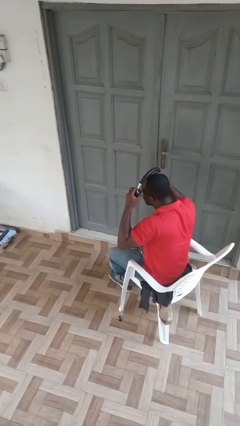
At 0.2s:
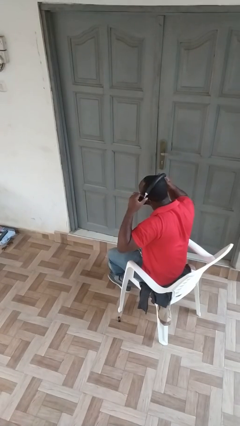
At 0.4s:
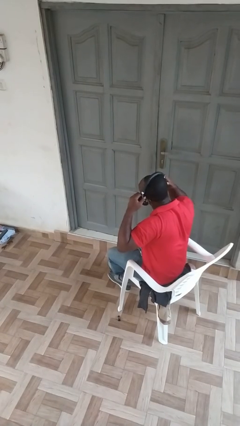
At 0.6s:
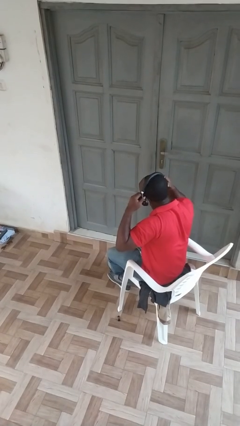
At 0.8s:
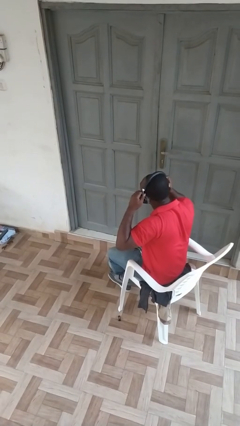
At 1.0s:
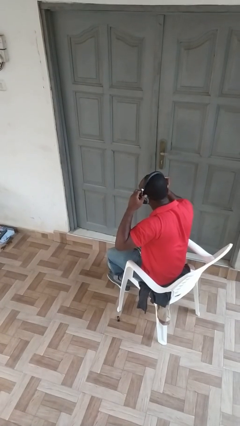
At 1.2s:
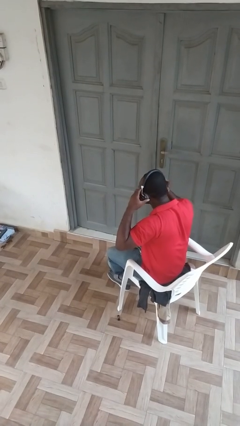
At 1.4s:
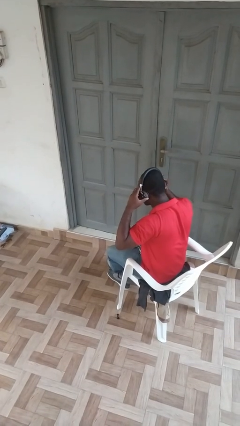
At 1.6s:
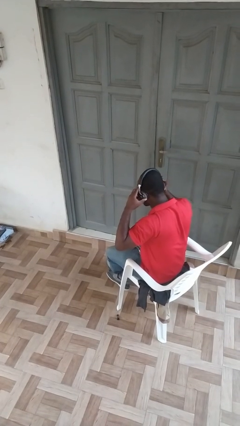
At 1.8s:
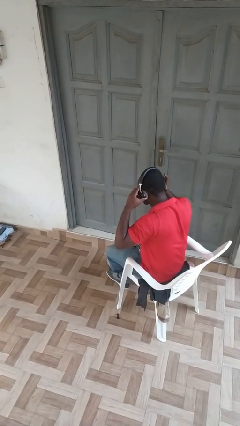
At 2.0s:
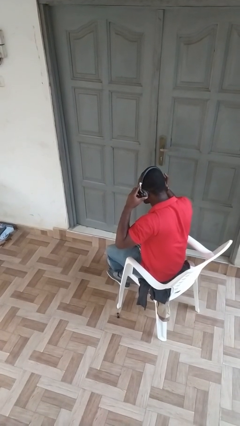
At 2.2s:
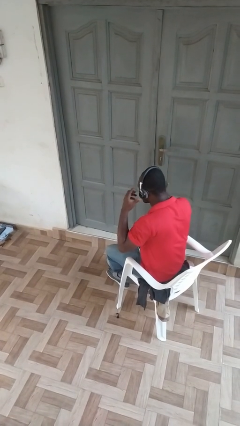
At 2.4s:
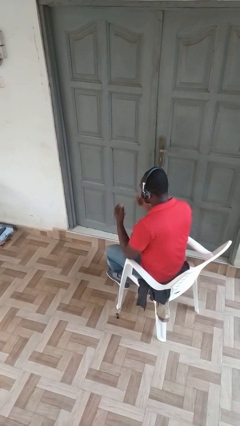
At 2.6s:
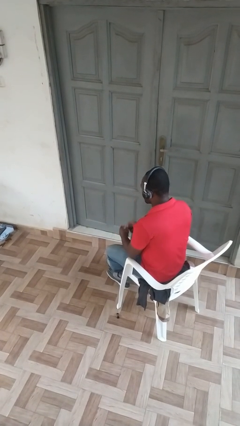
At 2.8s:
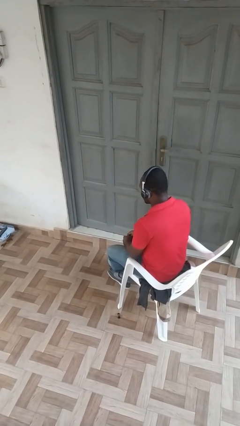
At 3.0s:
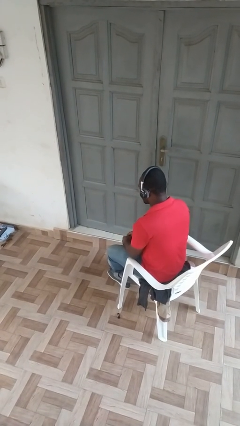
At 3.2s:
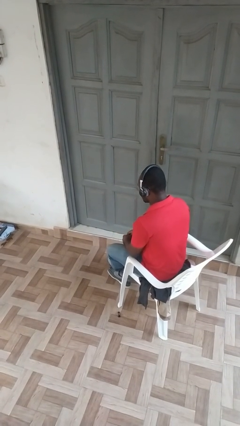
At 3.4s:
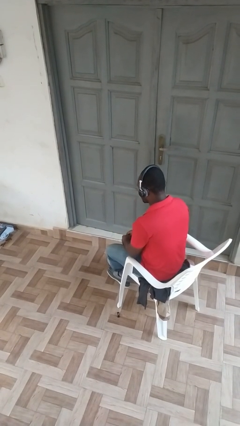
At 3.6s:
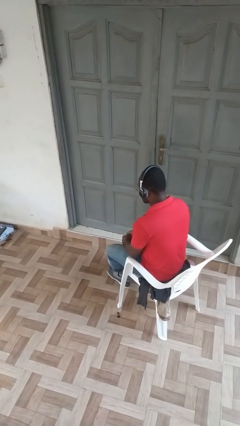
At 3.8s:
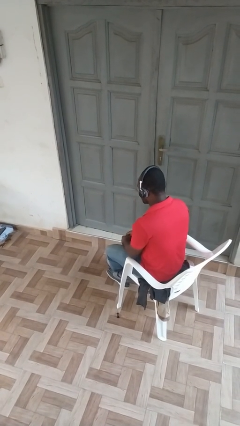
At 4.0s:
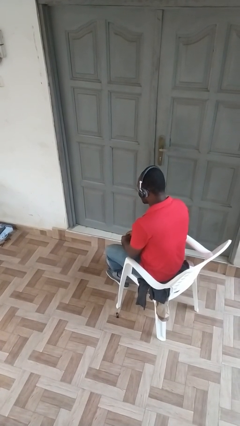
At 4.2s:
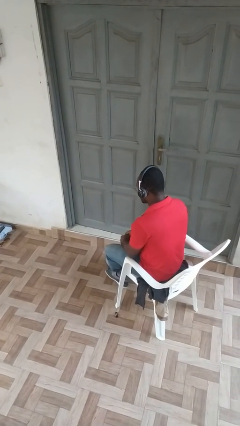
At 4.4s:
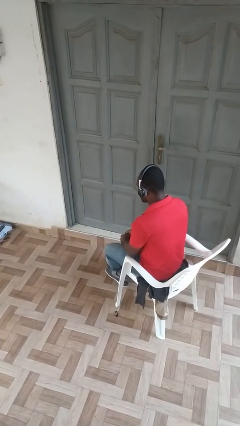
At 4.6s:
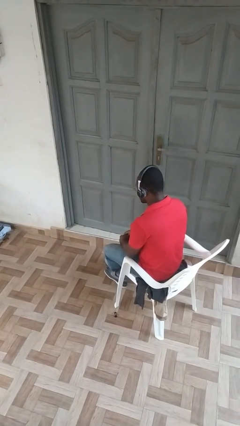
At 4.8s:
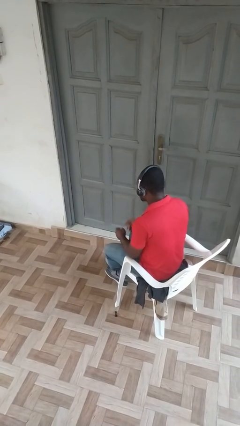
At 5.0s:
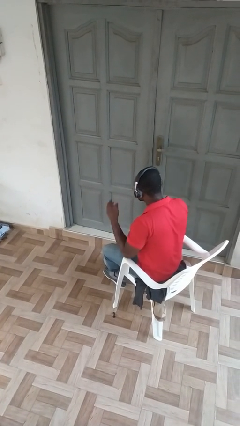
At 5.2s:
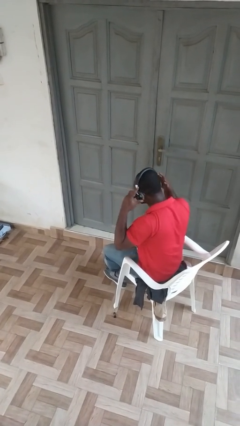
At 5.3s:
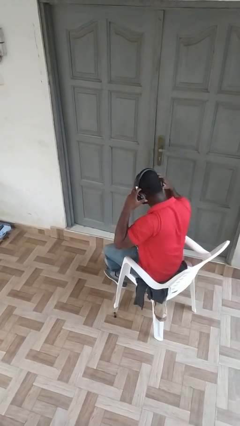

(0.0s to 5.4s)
person puts on headphones

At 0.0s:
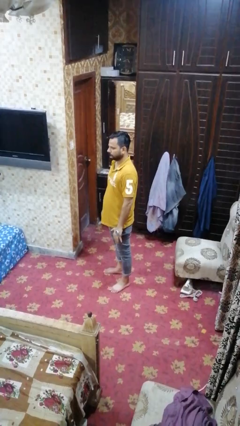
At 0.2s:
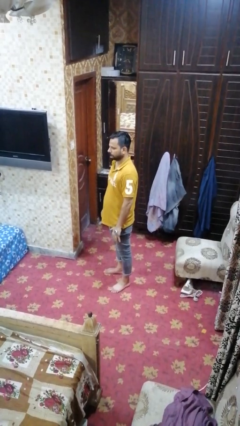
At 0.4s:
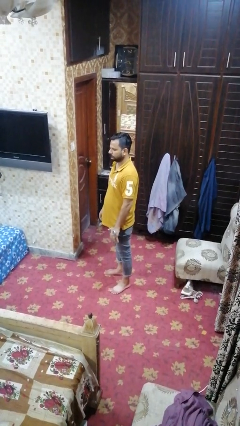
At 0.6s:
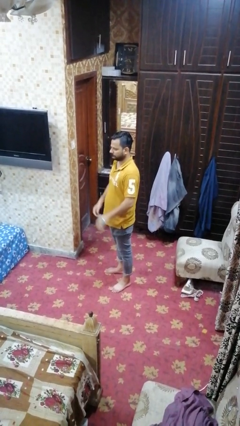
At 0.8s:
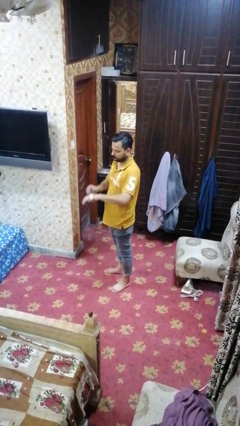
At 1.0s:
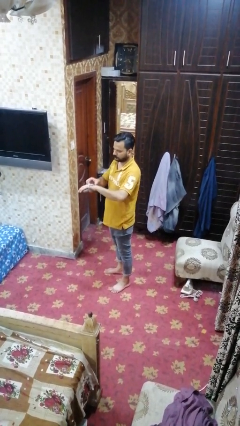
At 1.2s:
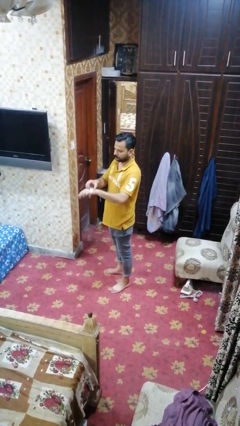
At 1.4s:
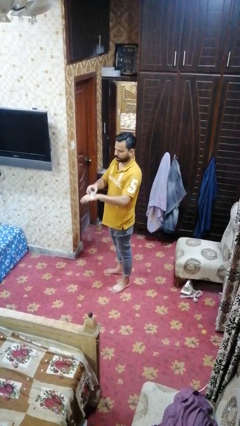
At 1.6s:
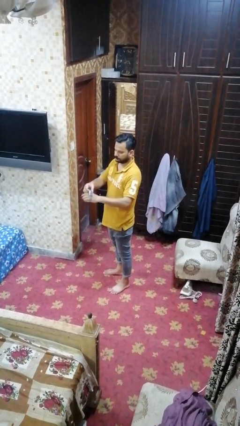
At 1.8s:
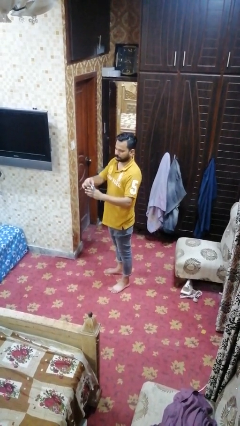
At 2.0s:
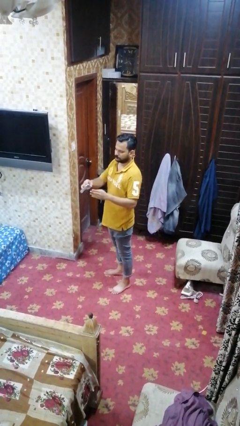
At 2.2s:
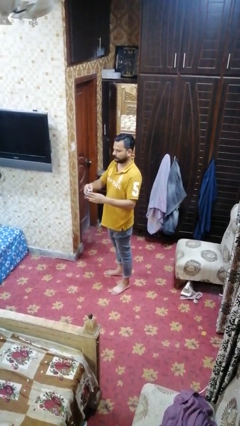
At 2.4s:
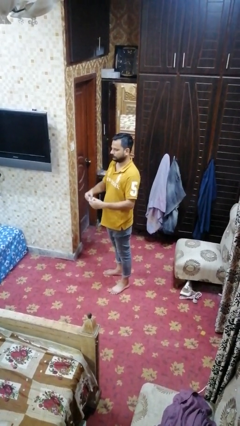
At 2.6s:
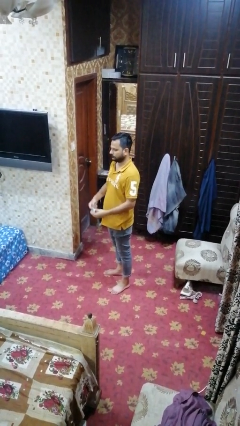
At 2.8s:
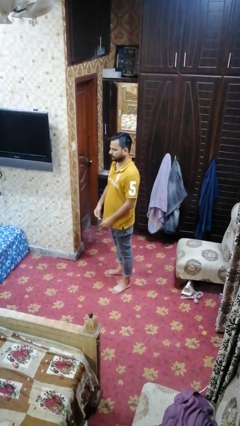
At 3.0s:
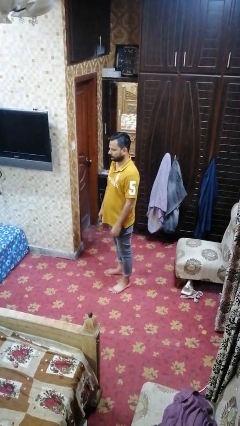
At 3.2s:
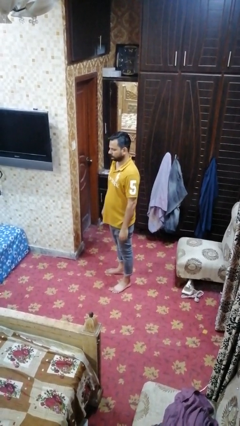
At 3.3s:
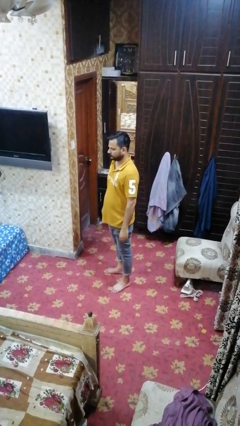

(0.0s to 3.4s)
person takes off wristwatch

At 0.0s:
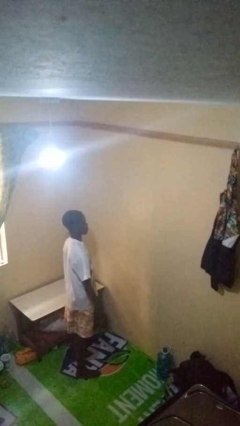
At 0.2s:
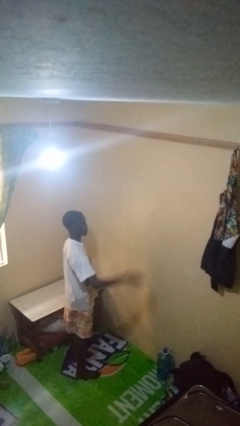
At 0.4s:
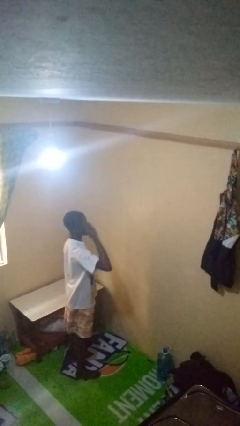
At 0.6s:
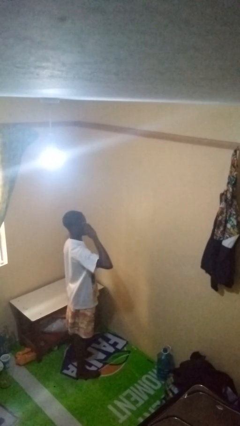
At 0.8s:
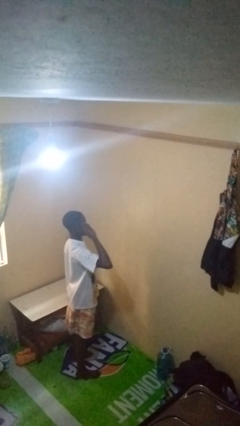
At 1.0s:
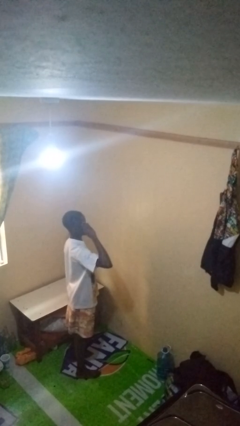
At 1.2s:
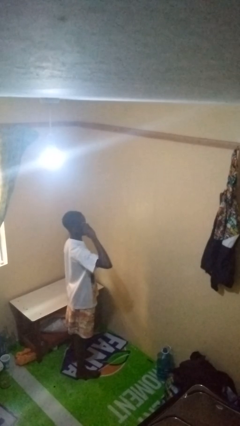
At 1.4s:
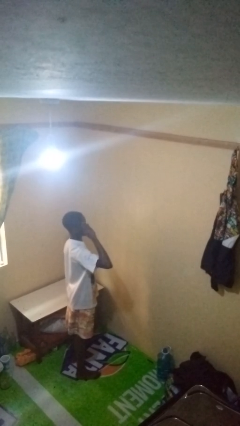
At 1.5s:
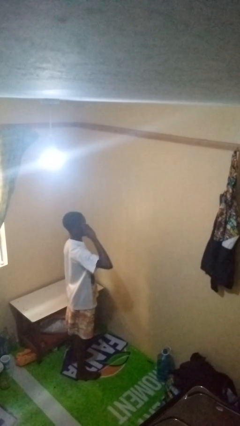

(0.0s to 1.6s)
person salutes

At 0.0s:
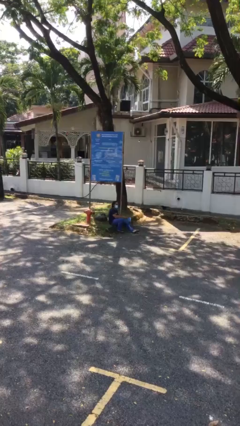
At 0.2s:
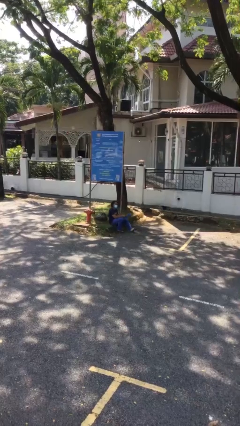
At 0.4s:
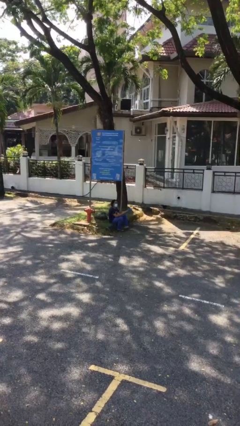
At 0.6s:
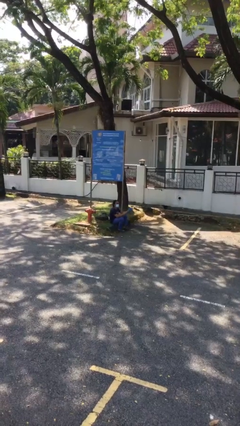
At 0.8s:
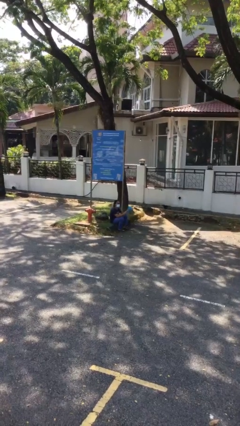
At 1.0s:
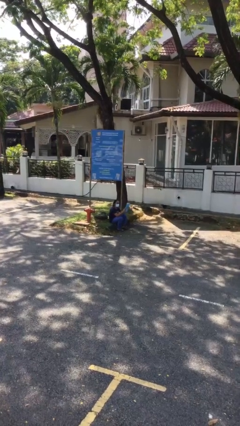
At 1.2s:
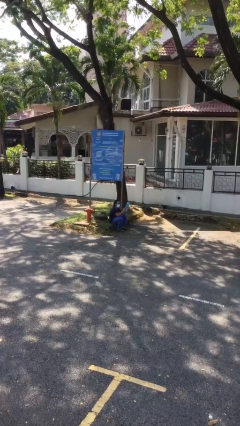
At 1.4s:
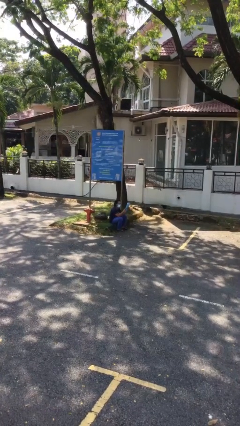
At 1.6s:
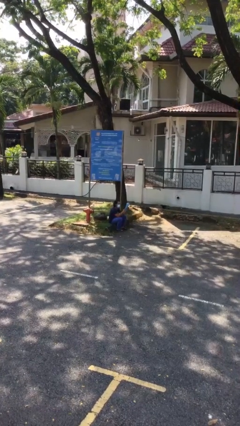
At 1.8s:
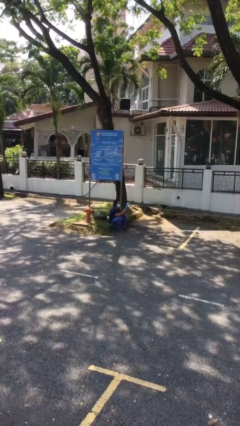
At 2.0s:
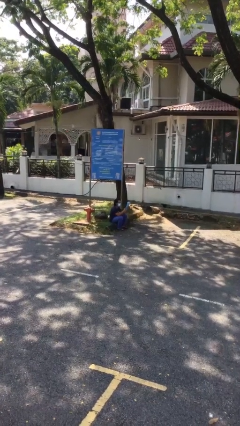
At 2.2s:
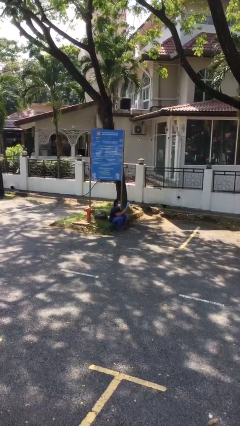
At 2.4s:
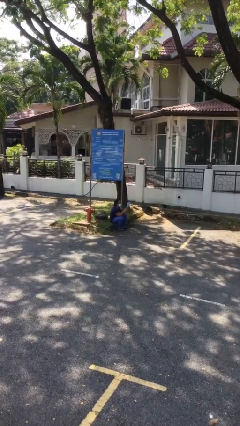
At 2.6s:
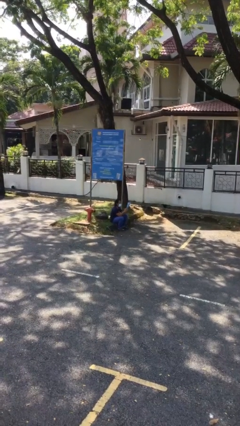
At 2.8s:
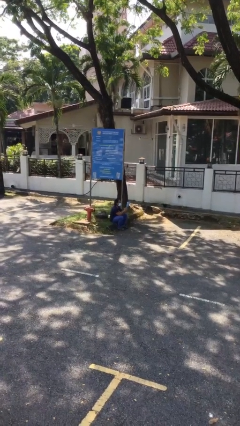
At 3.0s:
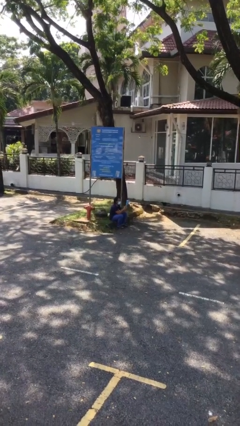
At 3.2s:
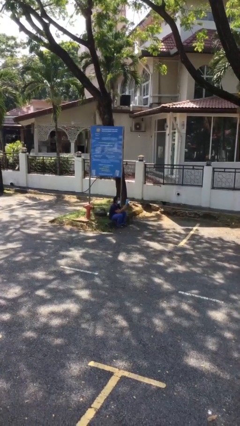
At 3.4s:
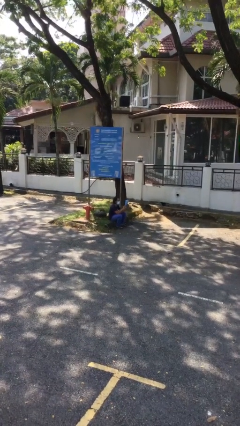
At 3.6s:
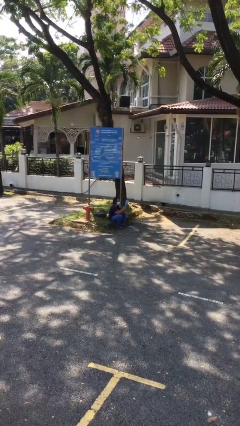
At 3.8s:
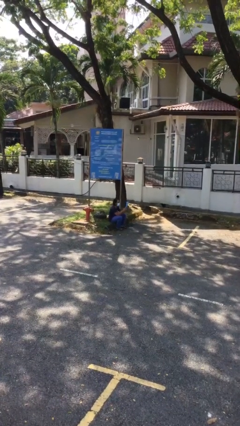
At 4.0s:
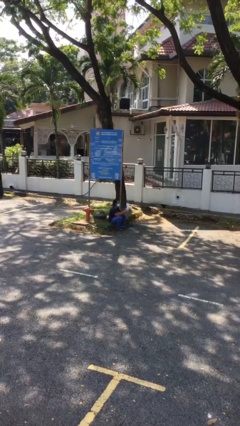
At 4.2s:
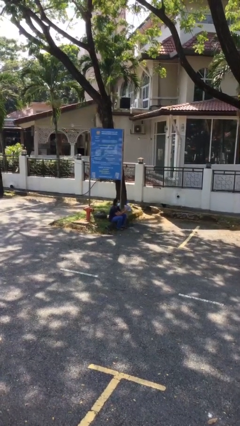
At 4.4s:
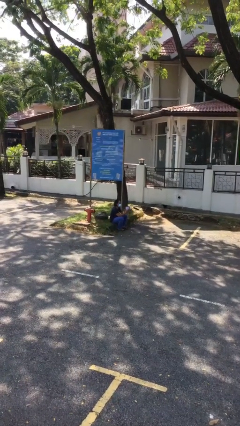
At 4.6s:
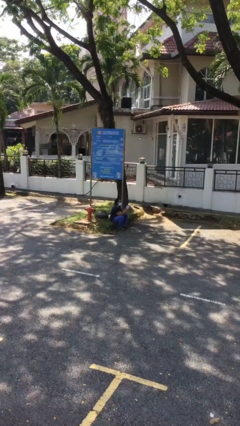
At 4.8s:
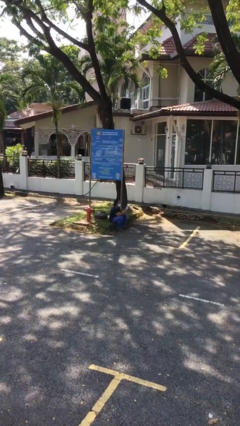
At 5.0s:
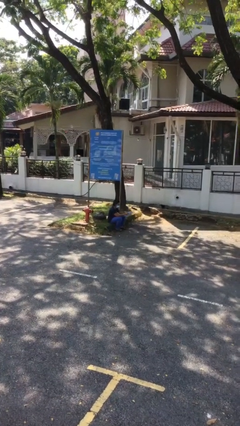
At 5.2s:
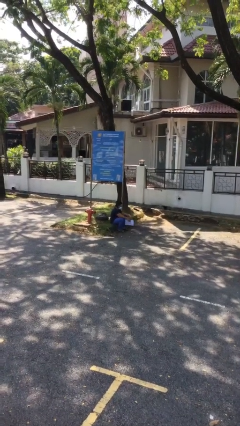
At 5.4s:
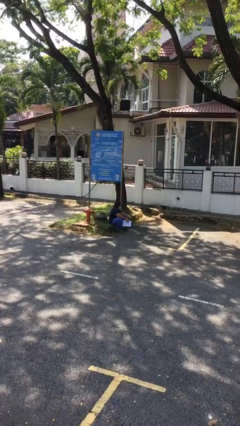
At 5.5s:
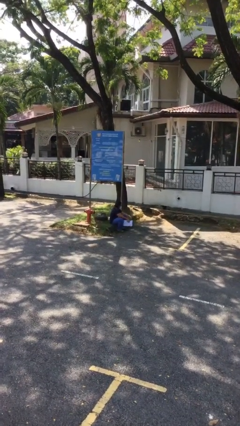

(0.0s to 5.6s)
person reads document

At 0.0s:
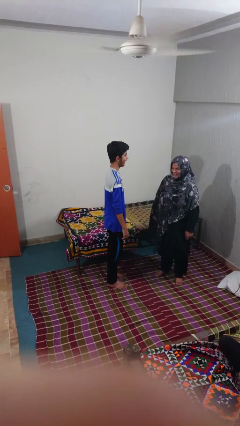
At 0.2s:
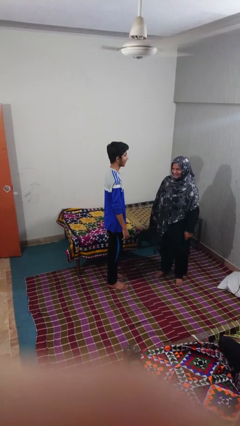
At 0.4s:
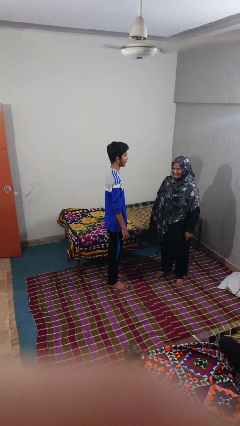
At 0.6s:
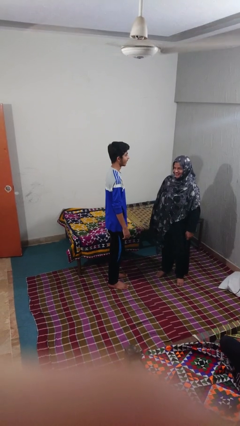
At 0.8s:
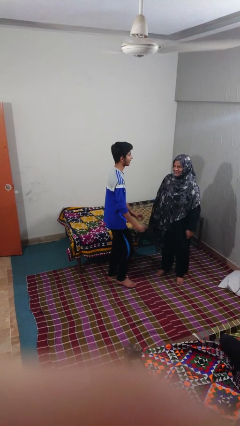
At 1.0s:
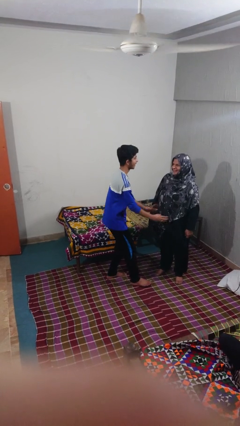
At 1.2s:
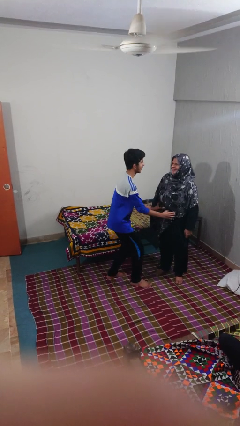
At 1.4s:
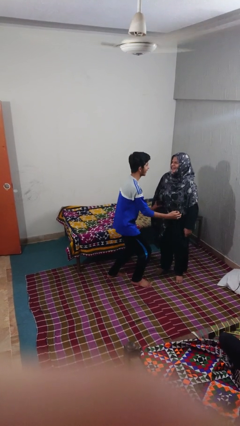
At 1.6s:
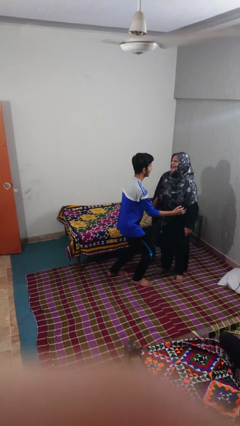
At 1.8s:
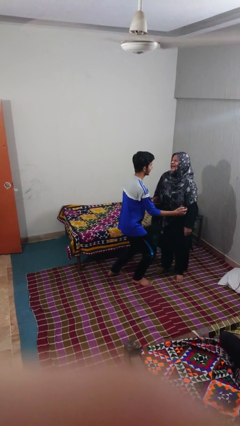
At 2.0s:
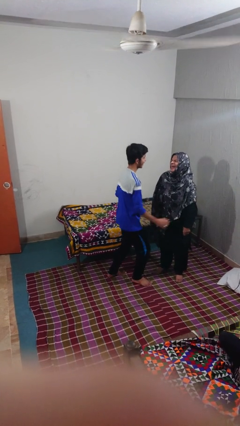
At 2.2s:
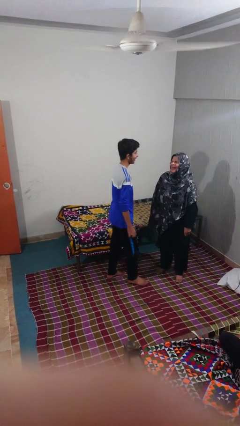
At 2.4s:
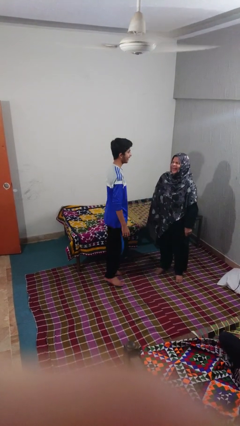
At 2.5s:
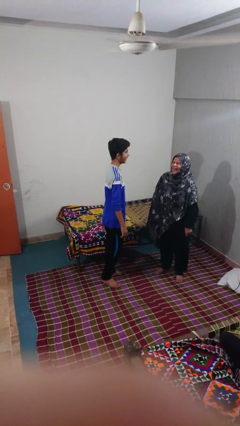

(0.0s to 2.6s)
person tickles person
